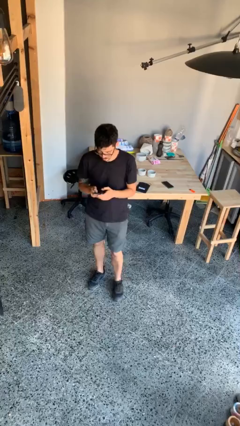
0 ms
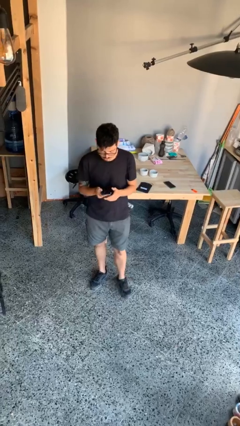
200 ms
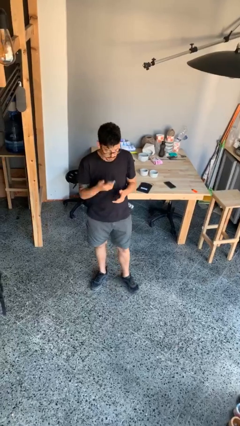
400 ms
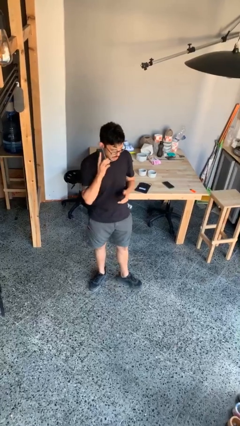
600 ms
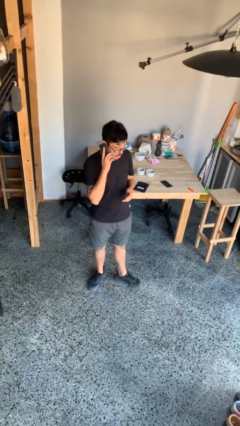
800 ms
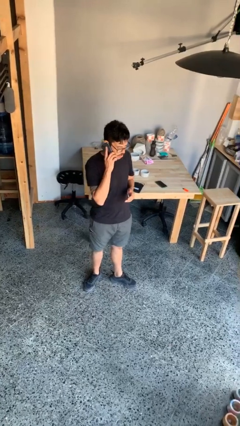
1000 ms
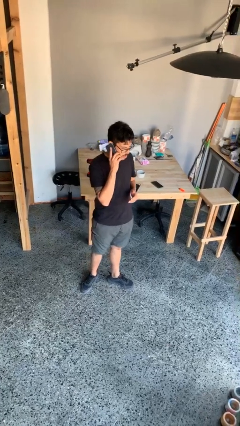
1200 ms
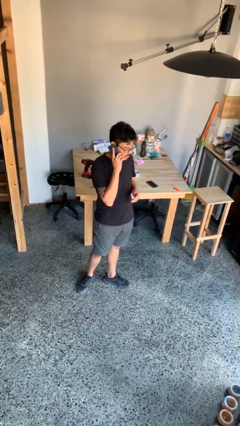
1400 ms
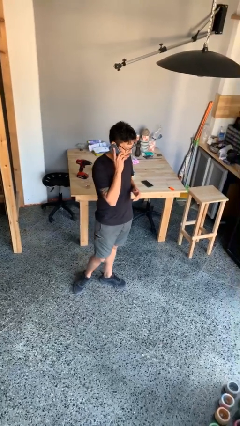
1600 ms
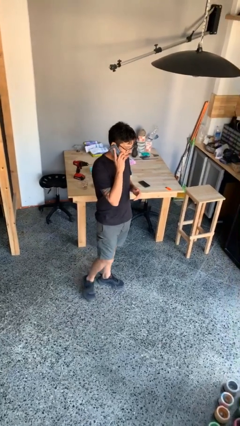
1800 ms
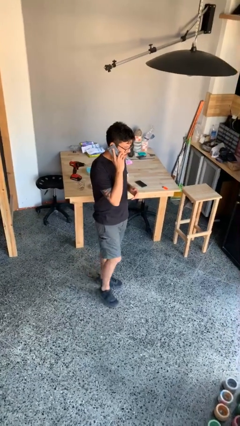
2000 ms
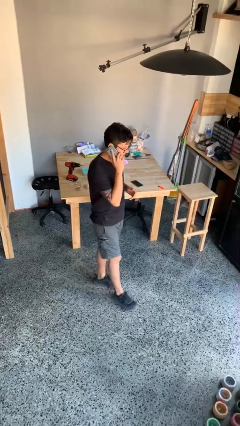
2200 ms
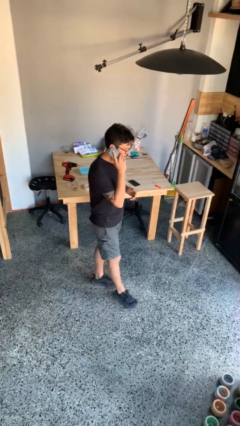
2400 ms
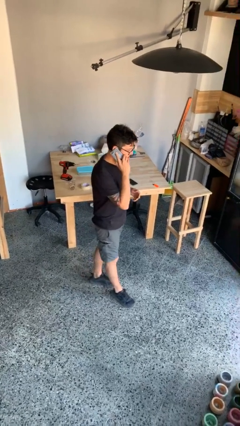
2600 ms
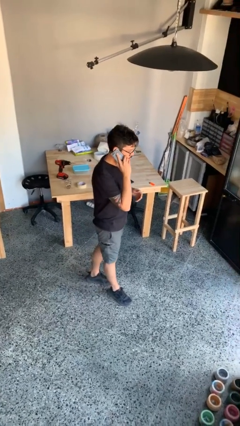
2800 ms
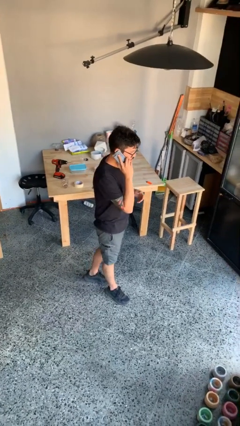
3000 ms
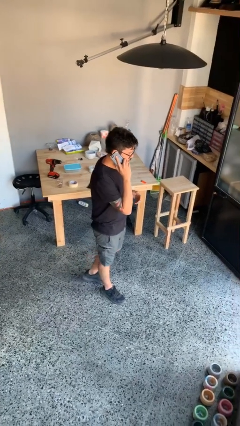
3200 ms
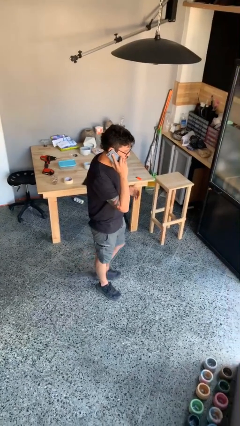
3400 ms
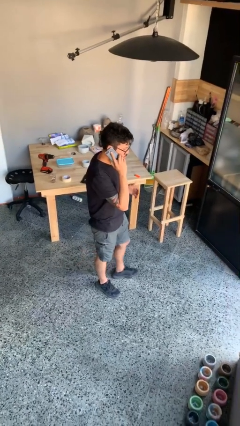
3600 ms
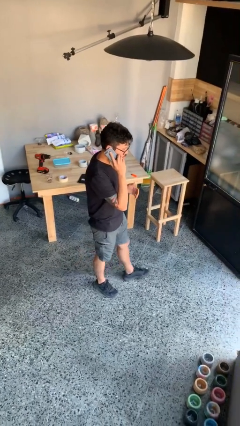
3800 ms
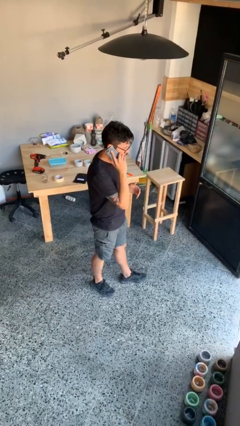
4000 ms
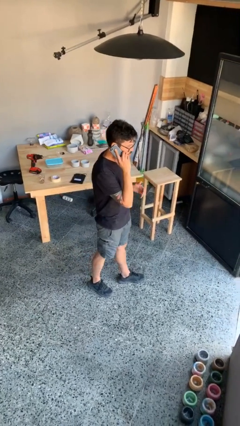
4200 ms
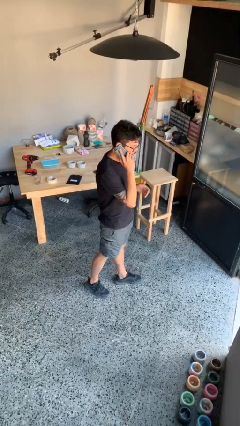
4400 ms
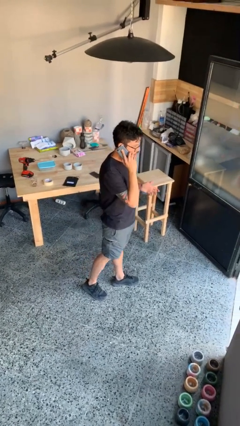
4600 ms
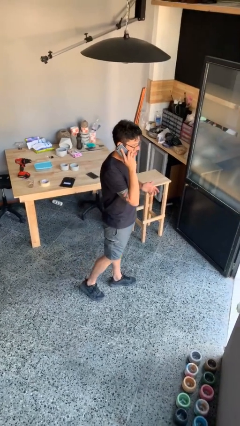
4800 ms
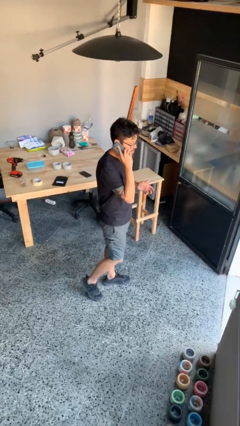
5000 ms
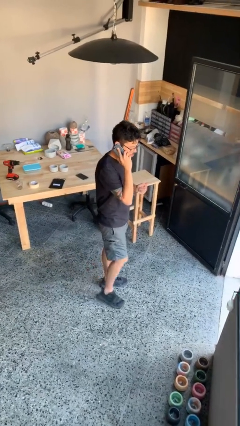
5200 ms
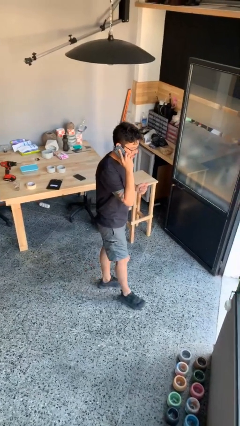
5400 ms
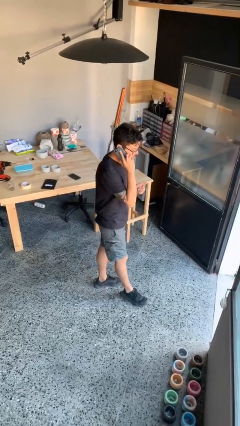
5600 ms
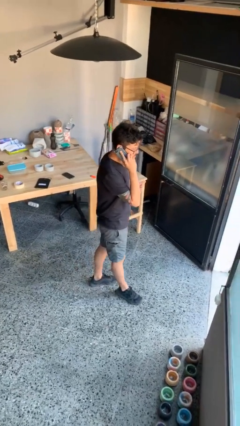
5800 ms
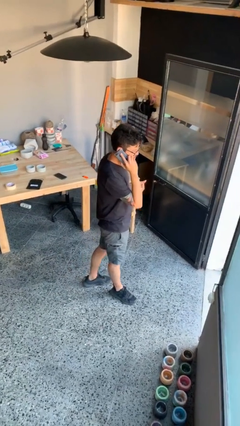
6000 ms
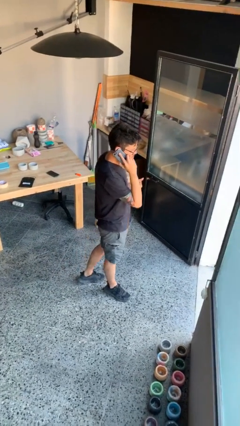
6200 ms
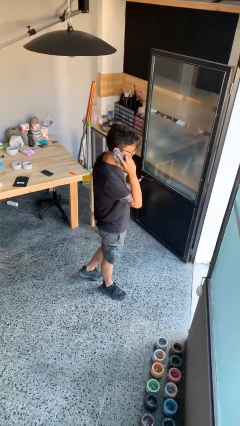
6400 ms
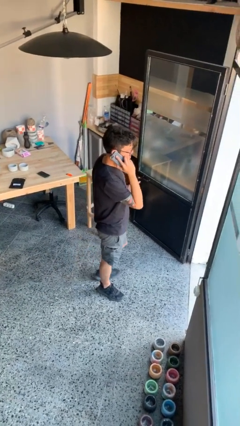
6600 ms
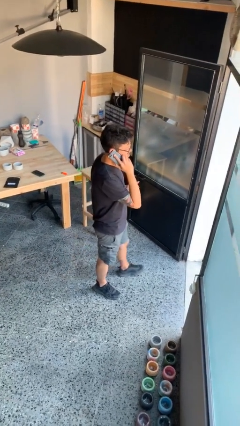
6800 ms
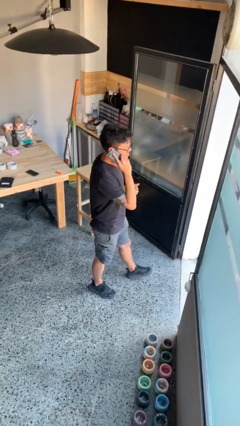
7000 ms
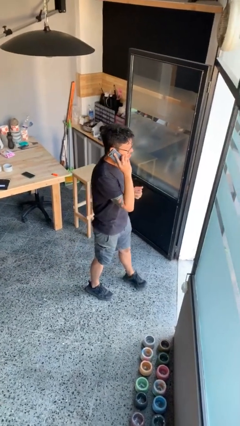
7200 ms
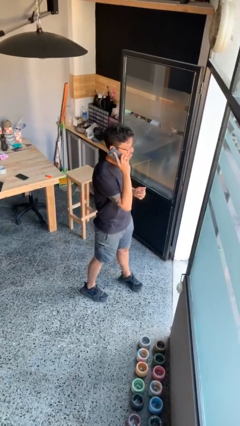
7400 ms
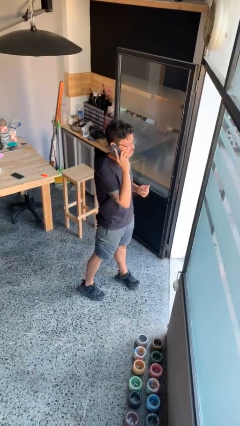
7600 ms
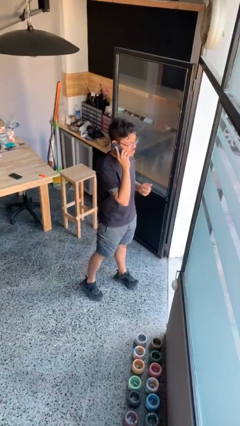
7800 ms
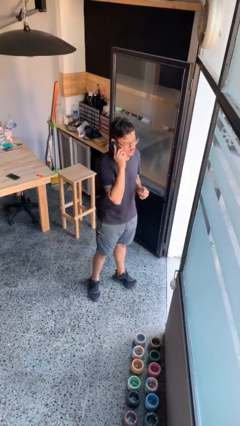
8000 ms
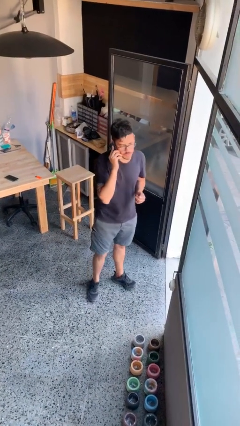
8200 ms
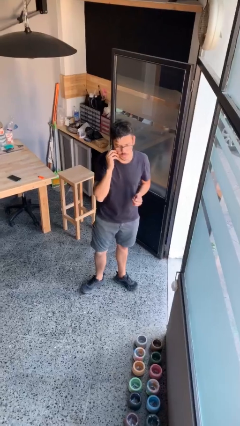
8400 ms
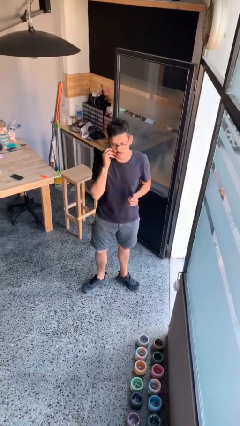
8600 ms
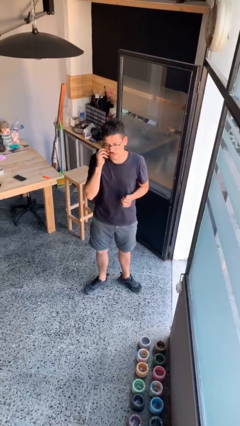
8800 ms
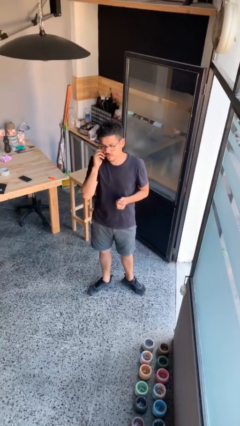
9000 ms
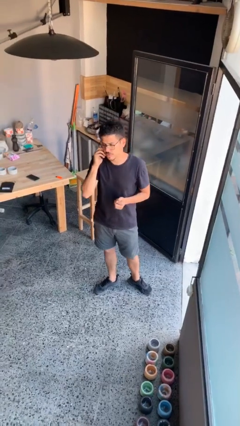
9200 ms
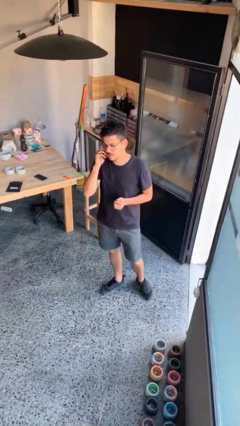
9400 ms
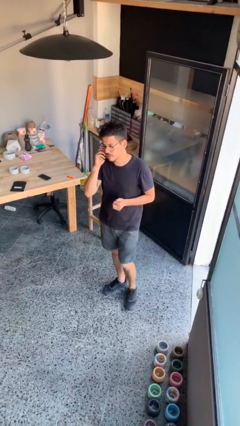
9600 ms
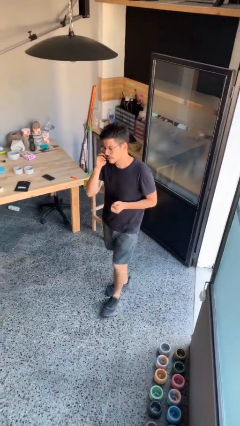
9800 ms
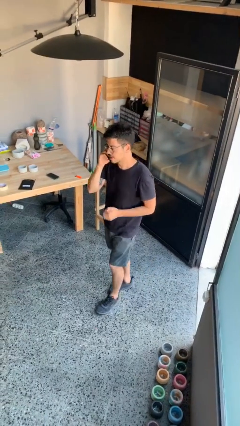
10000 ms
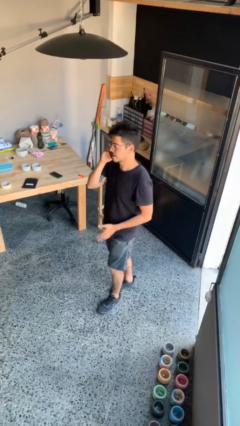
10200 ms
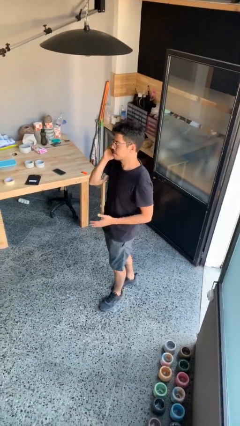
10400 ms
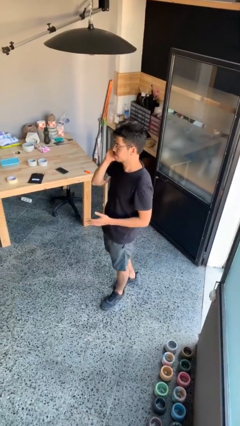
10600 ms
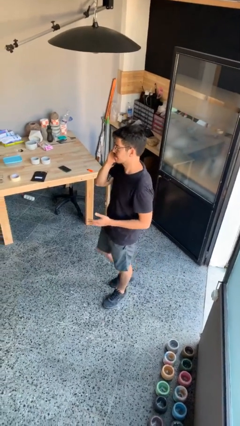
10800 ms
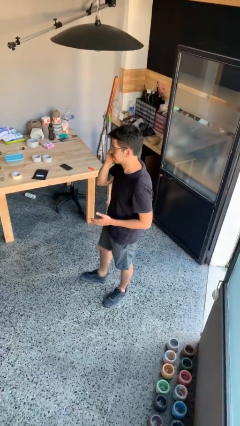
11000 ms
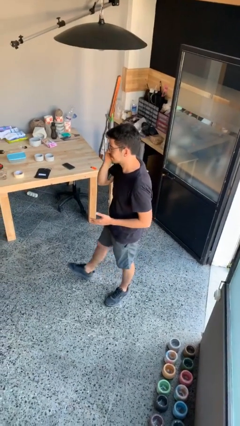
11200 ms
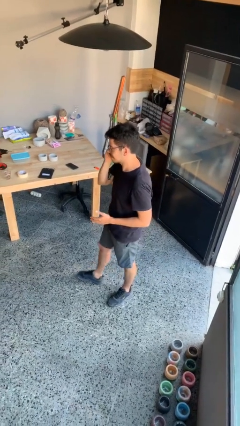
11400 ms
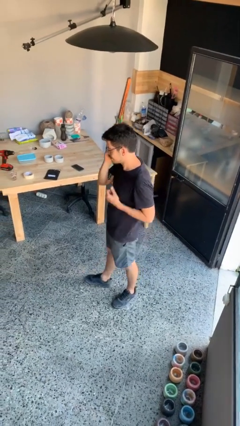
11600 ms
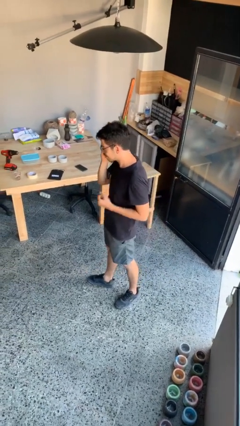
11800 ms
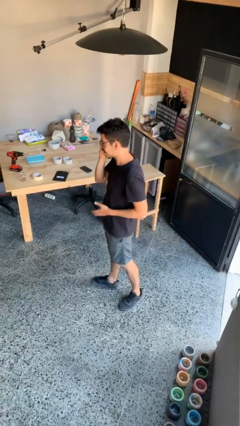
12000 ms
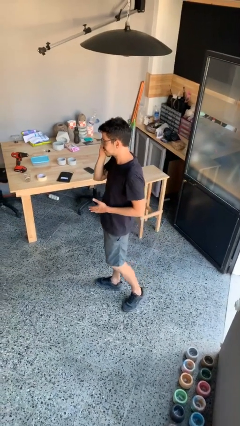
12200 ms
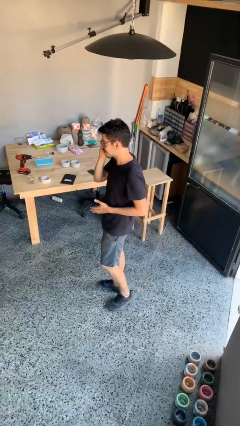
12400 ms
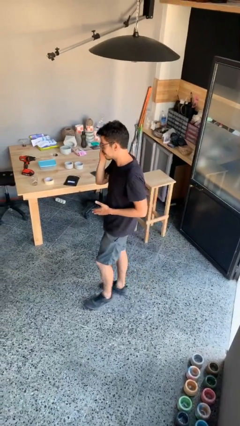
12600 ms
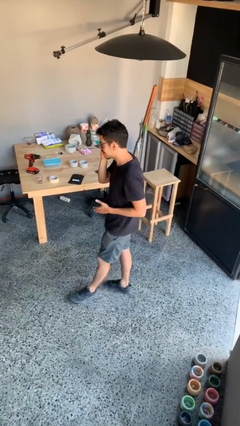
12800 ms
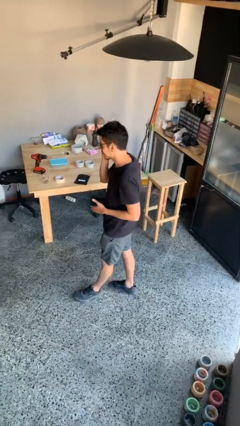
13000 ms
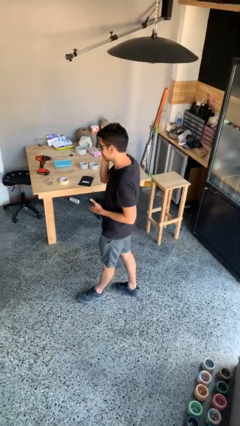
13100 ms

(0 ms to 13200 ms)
person talks on phone

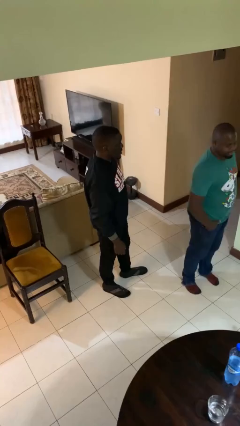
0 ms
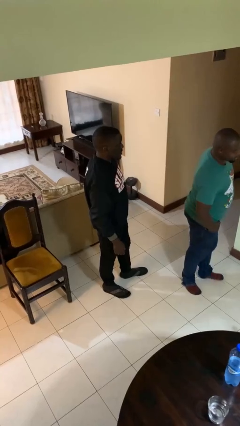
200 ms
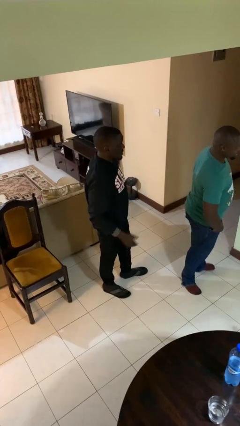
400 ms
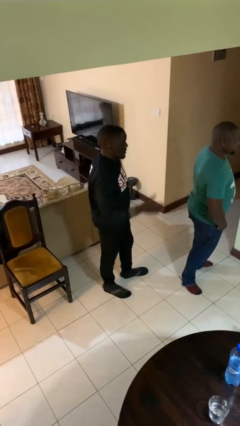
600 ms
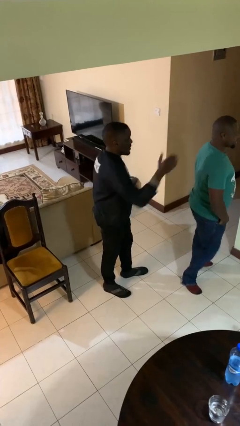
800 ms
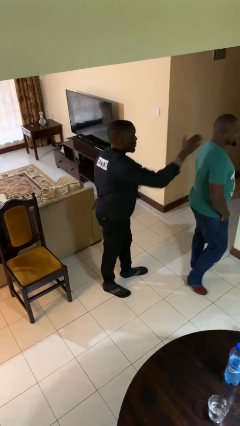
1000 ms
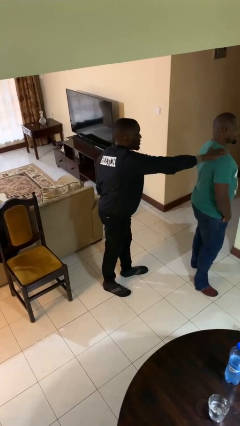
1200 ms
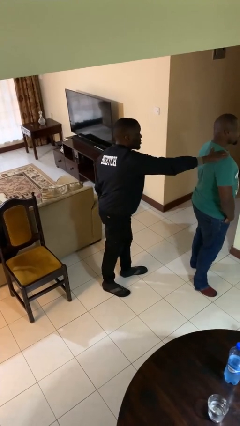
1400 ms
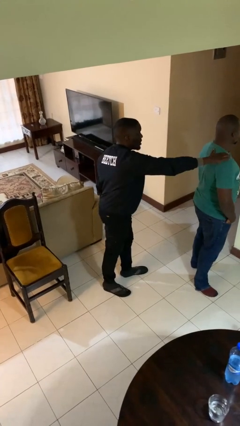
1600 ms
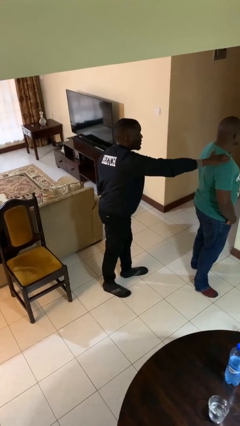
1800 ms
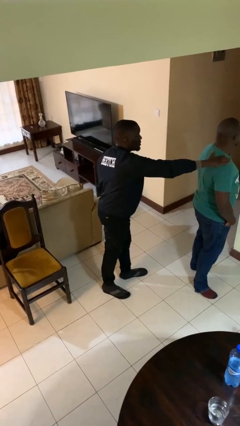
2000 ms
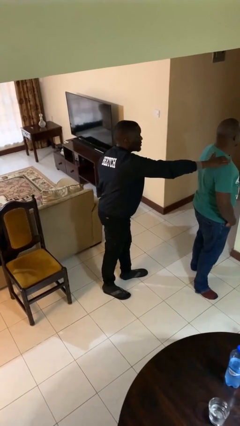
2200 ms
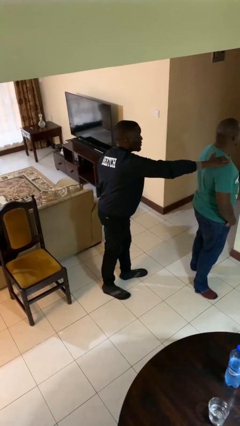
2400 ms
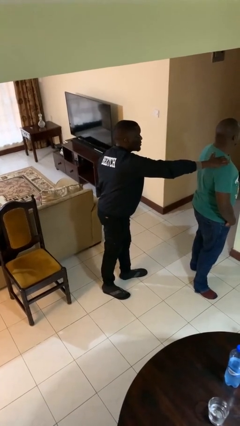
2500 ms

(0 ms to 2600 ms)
person grabs person by shoulder

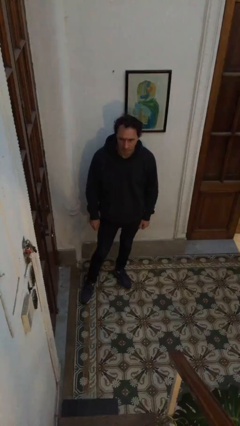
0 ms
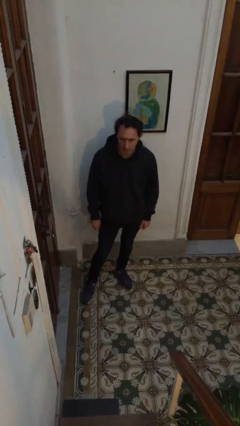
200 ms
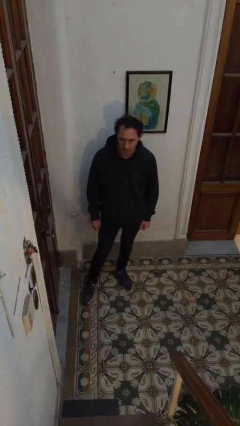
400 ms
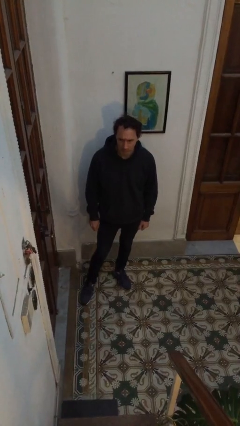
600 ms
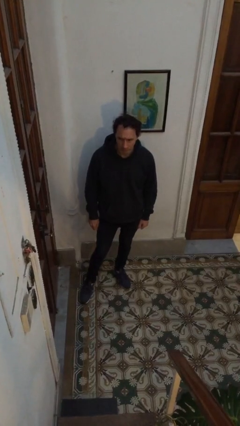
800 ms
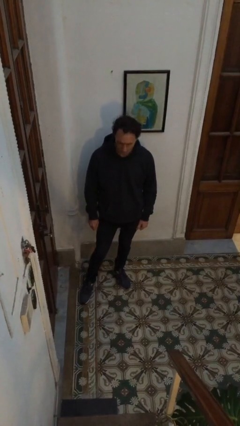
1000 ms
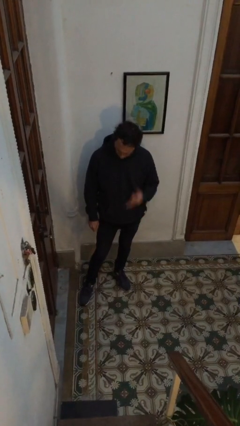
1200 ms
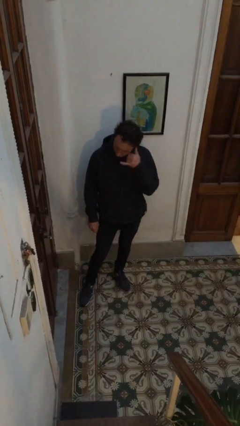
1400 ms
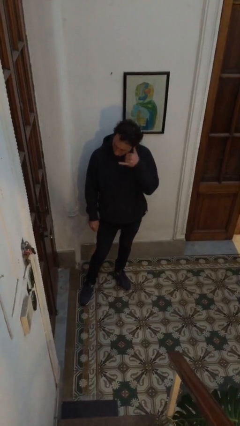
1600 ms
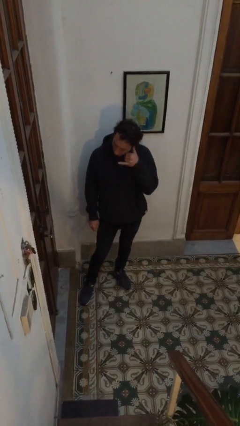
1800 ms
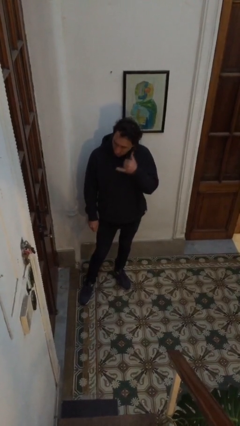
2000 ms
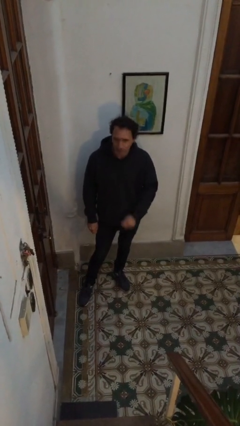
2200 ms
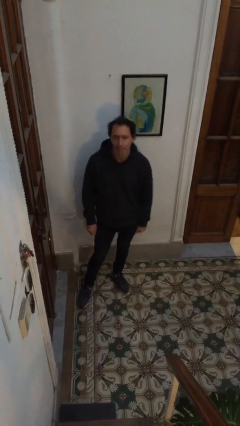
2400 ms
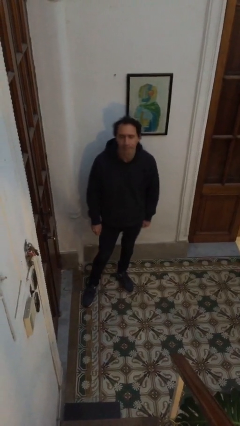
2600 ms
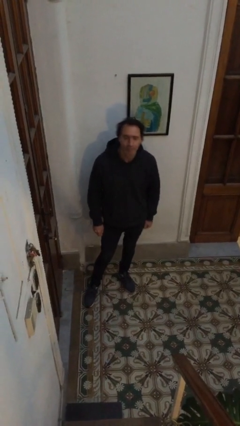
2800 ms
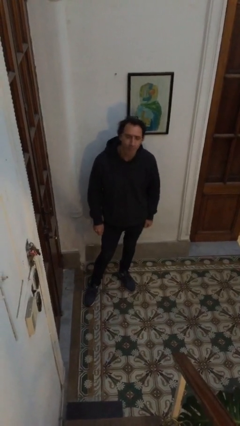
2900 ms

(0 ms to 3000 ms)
person gestures call me
